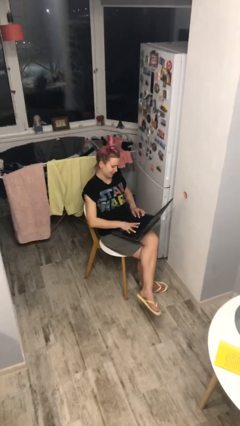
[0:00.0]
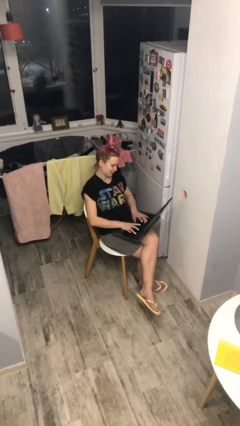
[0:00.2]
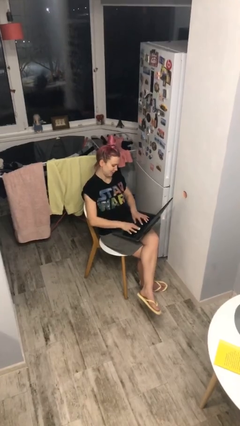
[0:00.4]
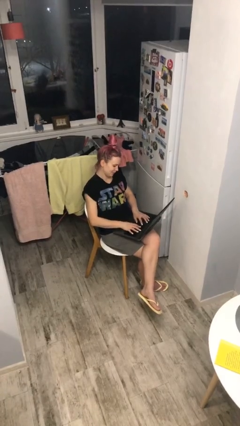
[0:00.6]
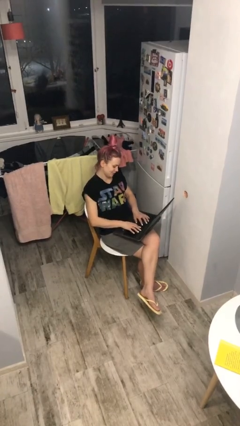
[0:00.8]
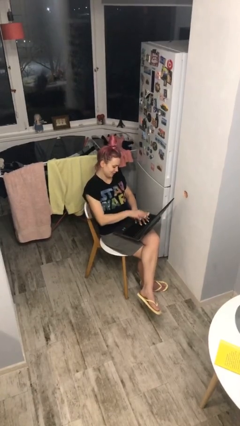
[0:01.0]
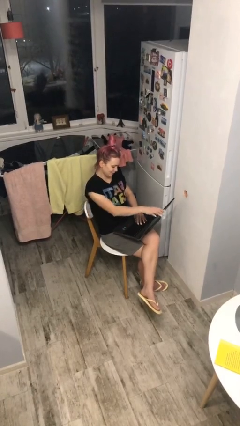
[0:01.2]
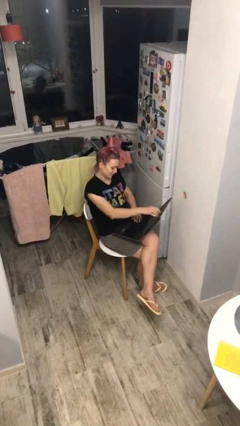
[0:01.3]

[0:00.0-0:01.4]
person interacts with laptop

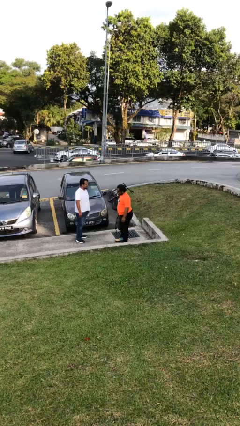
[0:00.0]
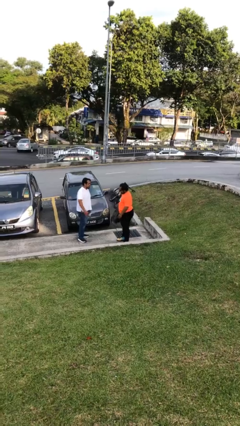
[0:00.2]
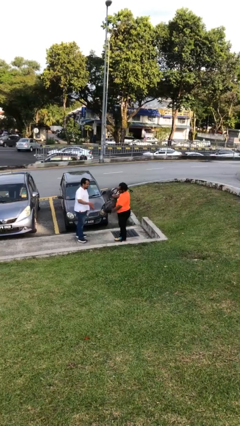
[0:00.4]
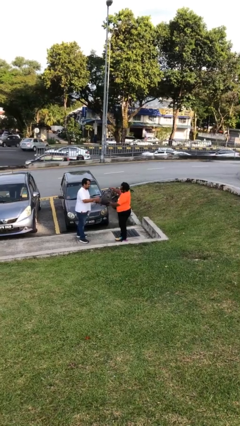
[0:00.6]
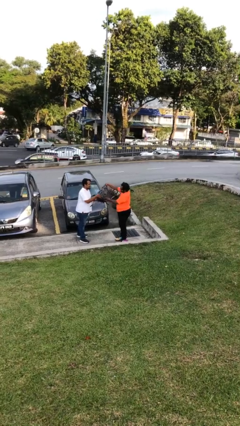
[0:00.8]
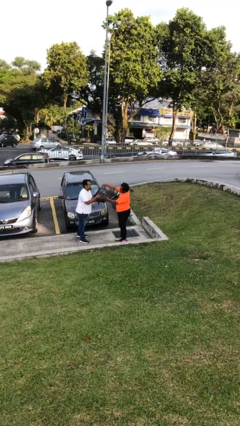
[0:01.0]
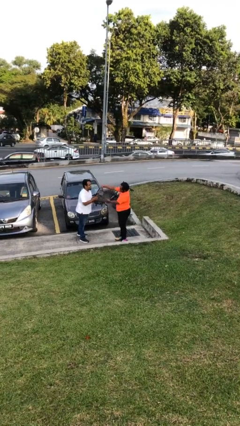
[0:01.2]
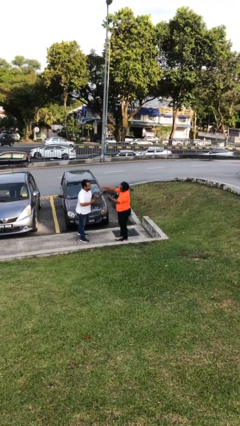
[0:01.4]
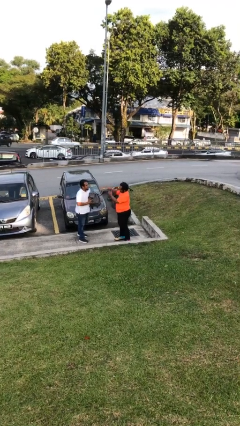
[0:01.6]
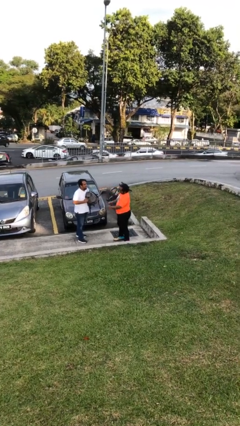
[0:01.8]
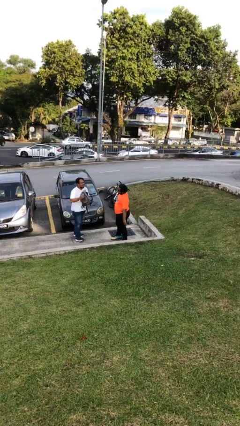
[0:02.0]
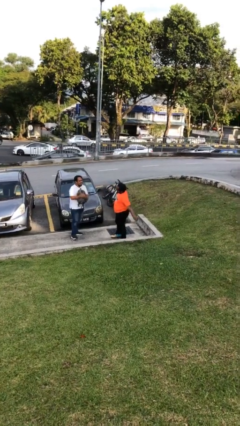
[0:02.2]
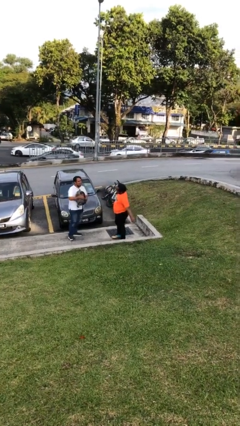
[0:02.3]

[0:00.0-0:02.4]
person transfers object to person

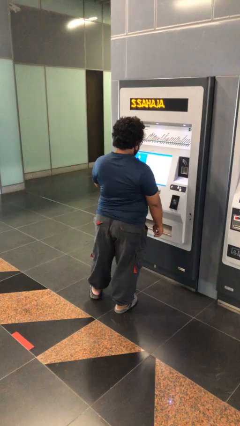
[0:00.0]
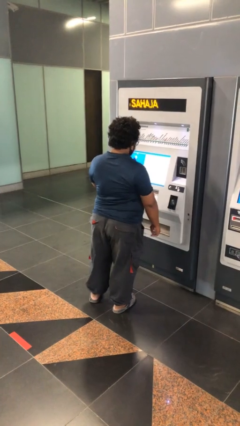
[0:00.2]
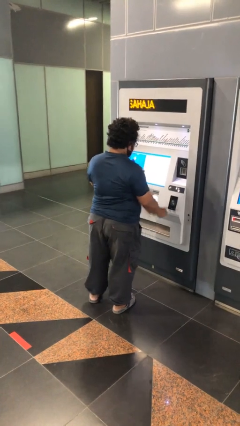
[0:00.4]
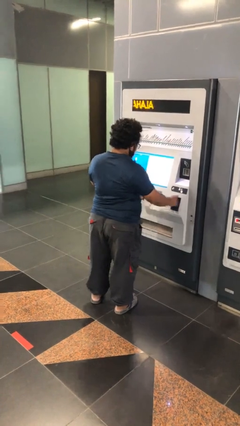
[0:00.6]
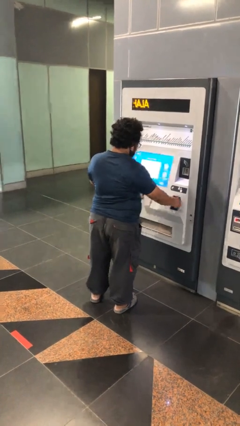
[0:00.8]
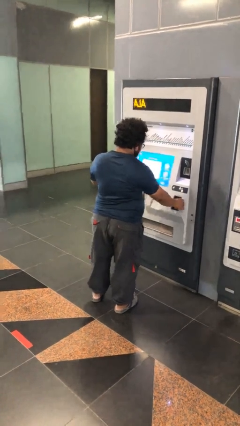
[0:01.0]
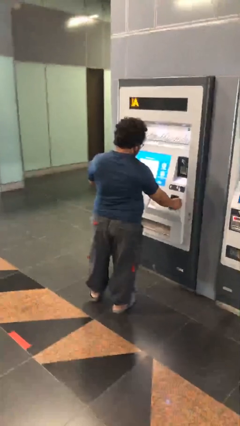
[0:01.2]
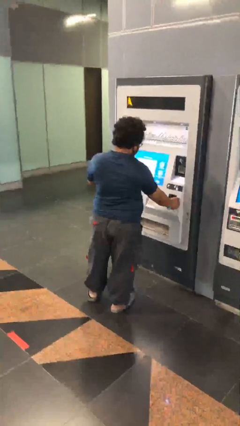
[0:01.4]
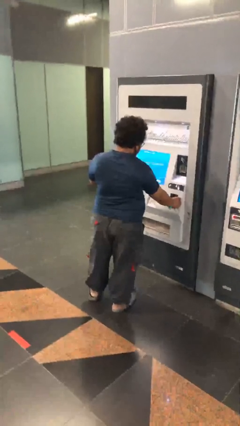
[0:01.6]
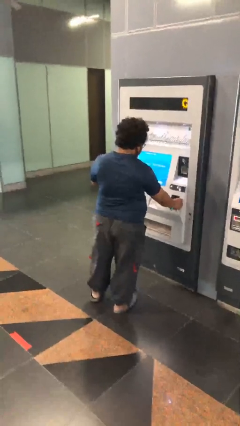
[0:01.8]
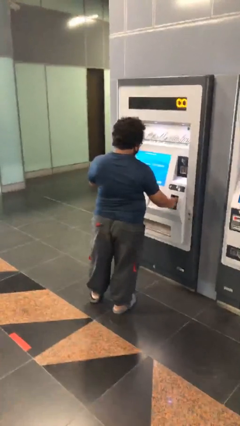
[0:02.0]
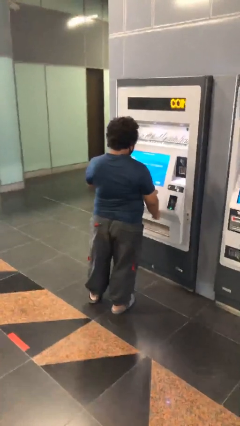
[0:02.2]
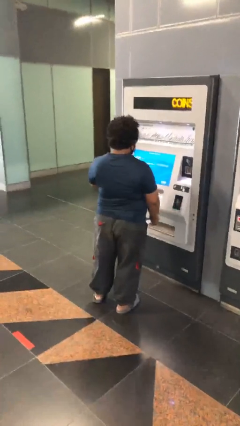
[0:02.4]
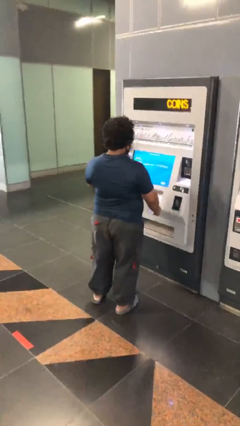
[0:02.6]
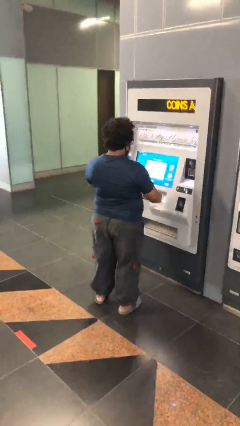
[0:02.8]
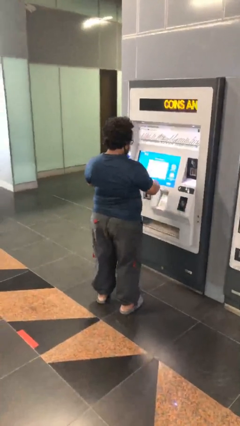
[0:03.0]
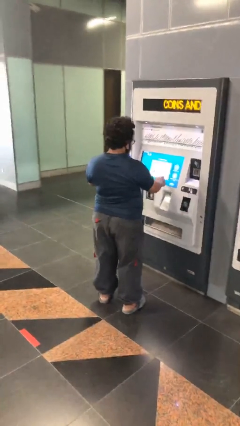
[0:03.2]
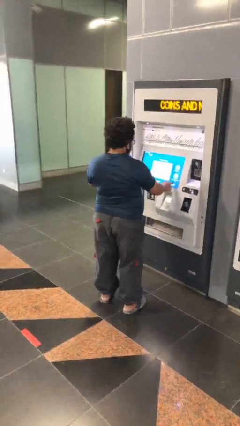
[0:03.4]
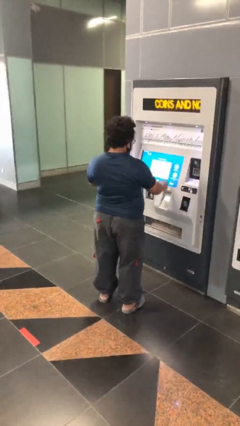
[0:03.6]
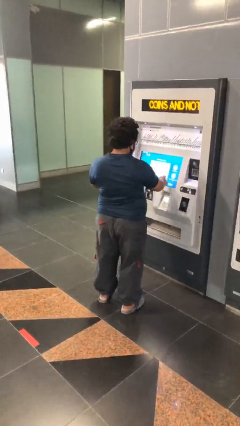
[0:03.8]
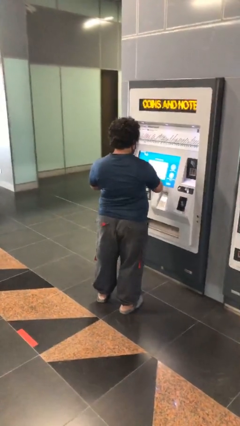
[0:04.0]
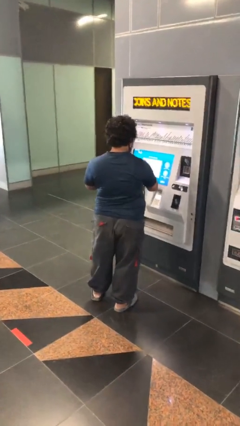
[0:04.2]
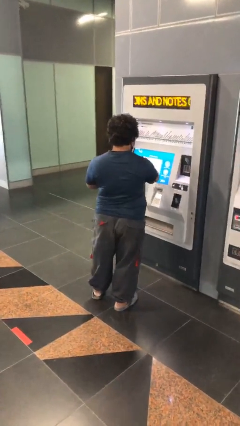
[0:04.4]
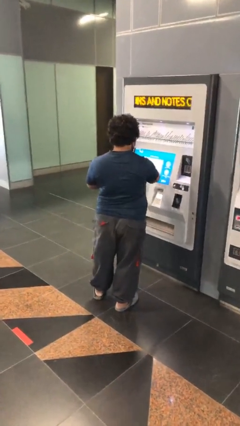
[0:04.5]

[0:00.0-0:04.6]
person purchases from machine

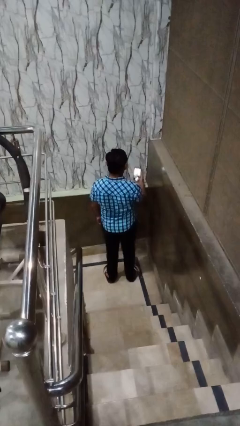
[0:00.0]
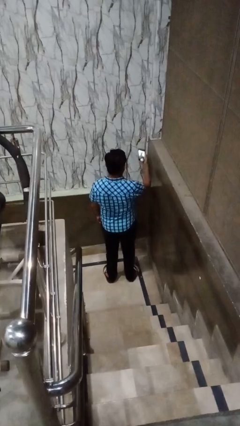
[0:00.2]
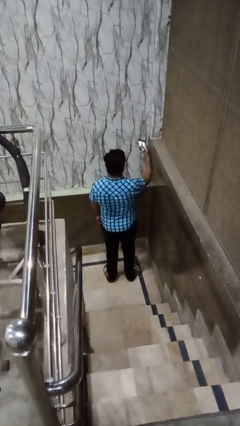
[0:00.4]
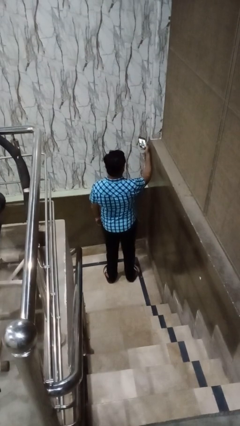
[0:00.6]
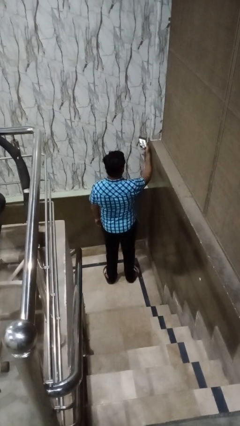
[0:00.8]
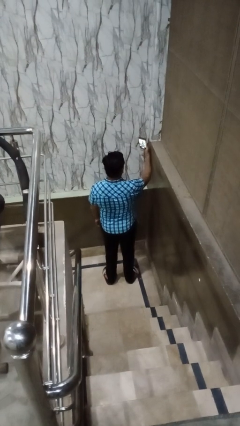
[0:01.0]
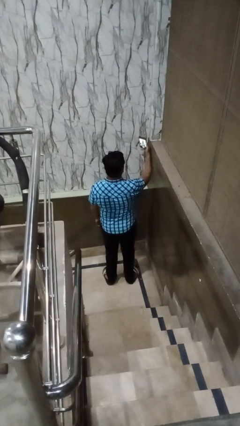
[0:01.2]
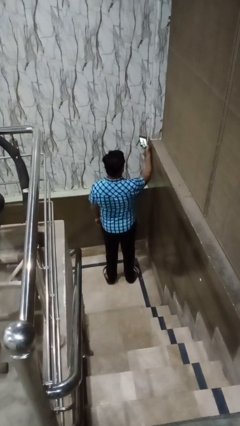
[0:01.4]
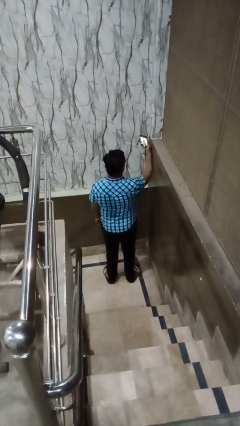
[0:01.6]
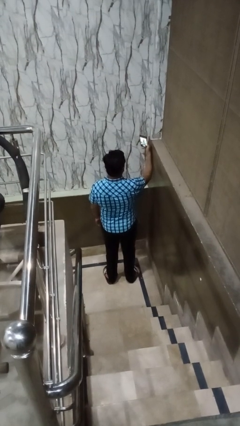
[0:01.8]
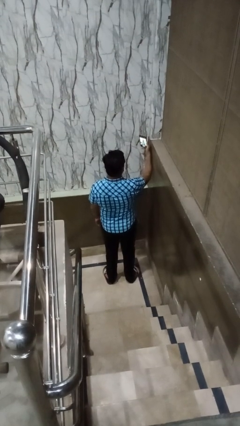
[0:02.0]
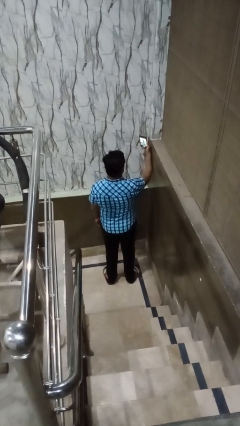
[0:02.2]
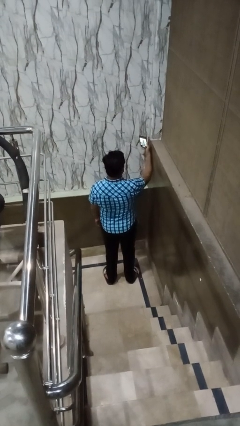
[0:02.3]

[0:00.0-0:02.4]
person takes selfie

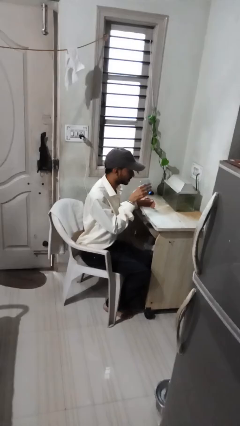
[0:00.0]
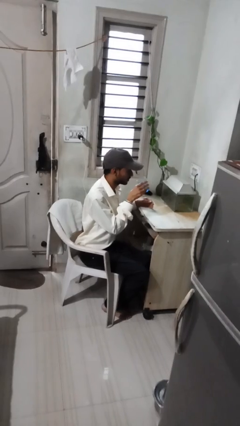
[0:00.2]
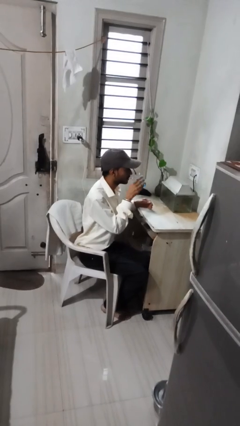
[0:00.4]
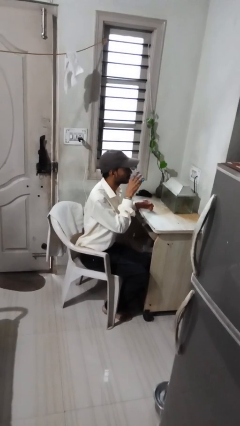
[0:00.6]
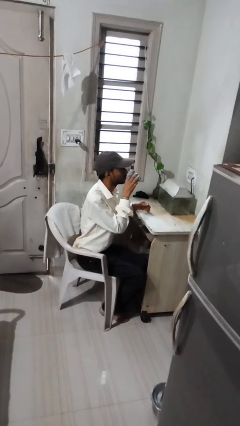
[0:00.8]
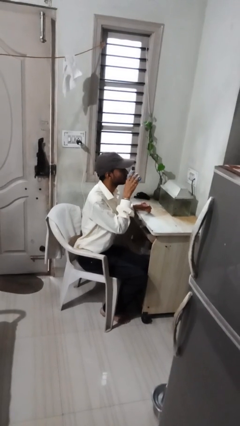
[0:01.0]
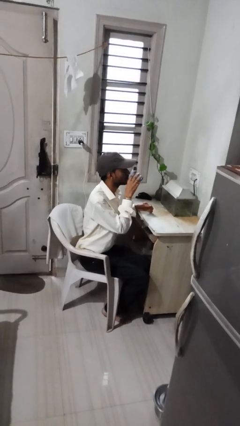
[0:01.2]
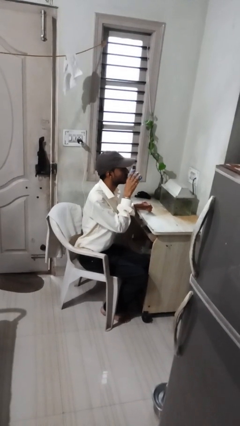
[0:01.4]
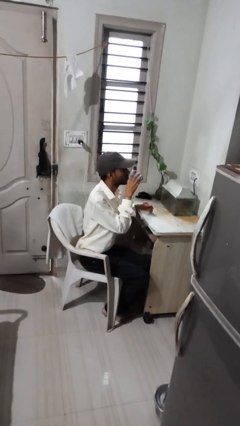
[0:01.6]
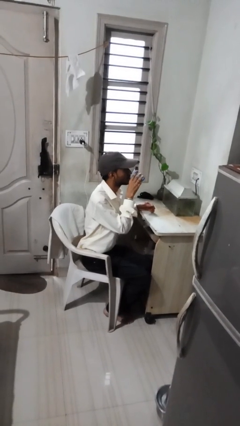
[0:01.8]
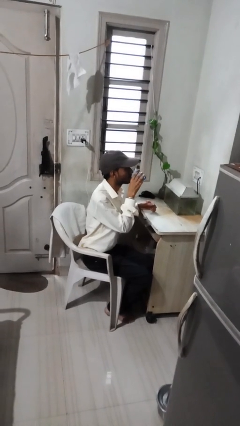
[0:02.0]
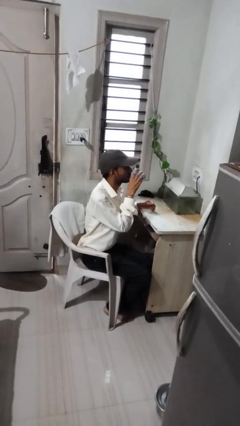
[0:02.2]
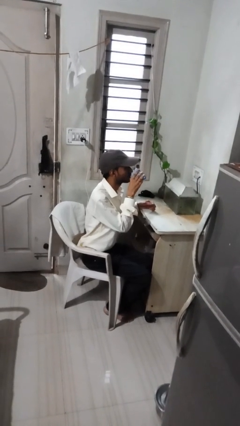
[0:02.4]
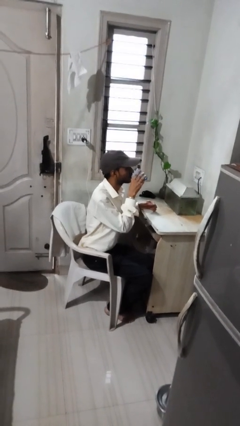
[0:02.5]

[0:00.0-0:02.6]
person drinks from shotglass

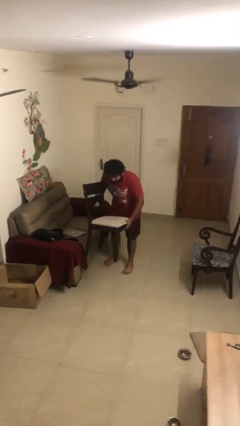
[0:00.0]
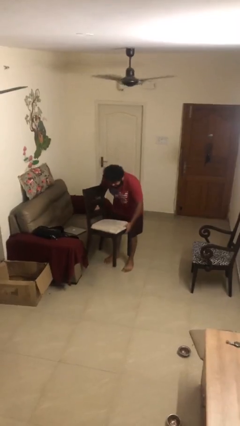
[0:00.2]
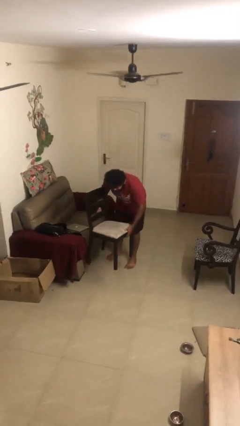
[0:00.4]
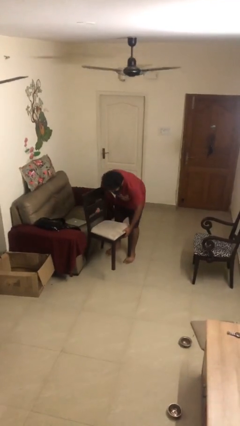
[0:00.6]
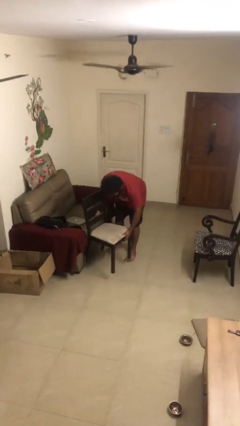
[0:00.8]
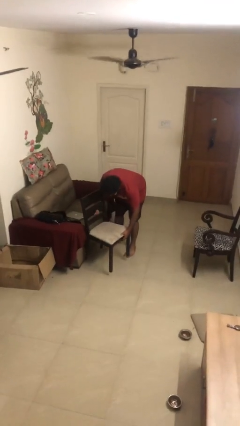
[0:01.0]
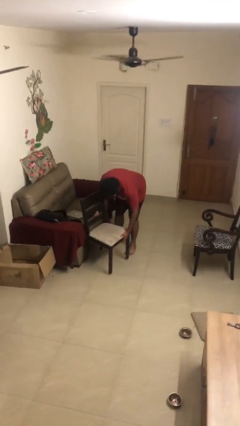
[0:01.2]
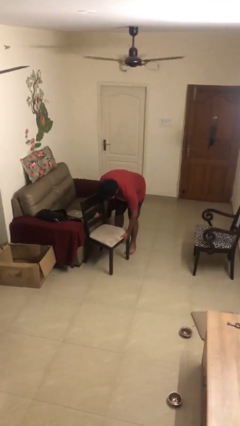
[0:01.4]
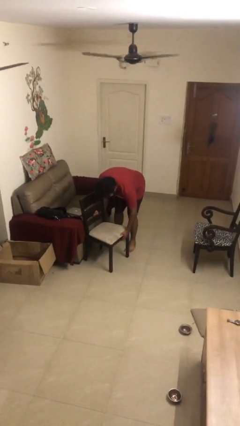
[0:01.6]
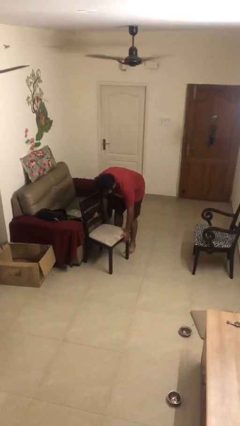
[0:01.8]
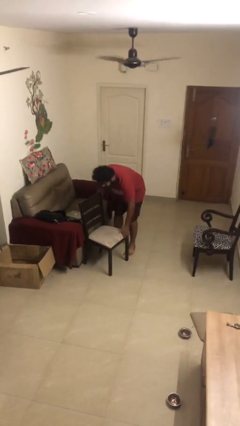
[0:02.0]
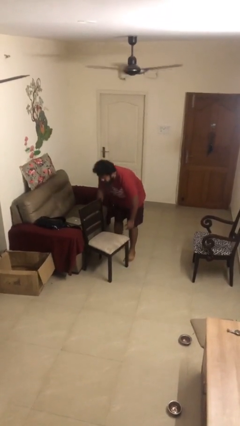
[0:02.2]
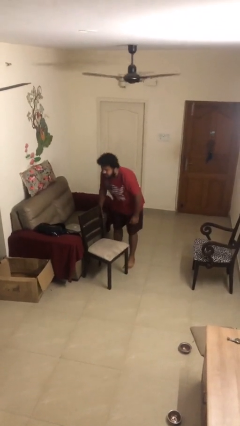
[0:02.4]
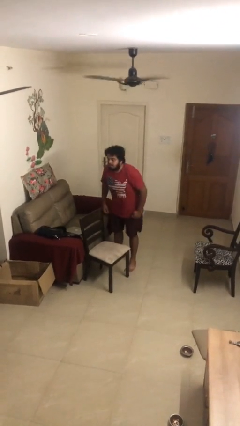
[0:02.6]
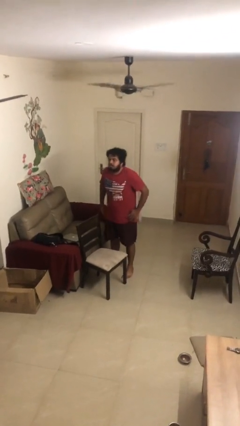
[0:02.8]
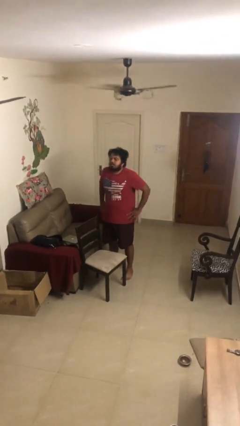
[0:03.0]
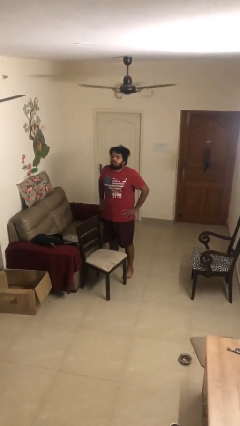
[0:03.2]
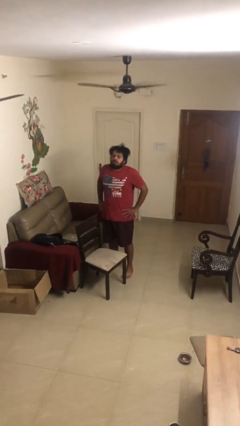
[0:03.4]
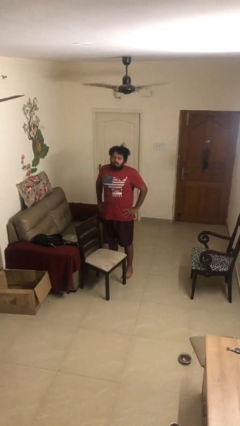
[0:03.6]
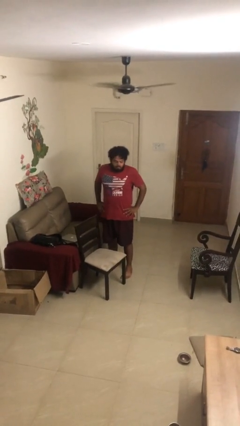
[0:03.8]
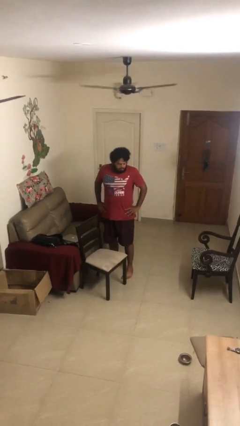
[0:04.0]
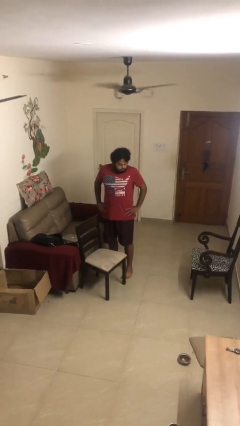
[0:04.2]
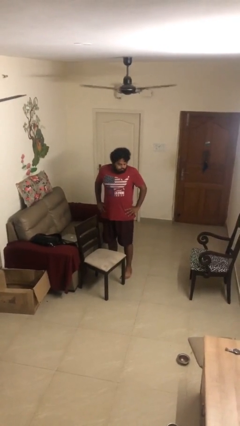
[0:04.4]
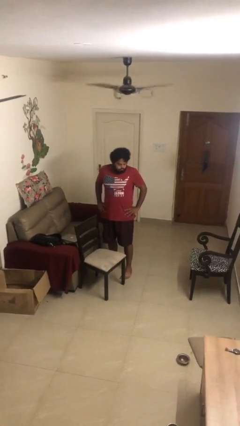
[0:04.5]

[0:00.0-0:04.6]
person puts down object on floor
